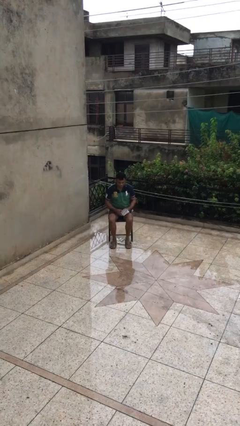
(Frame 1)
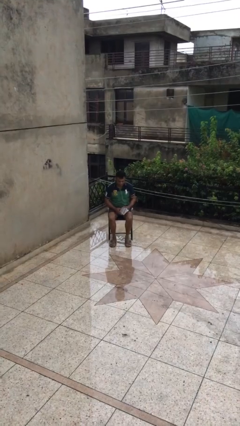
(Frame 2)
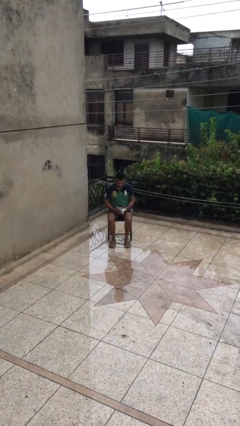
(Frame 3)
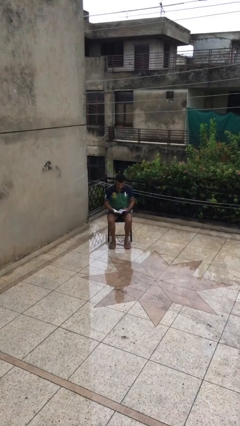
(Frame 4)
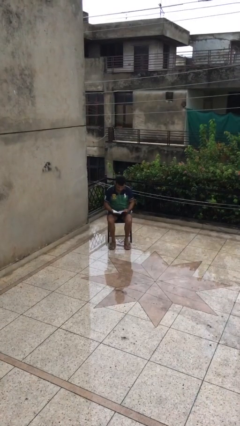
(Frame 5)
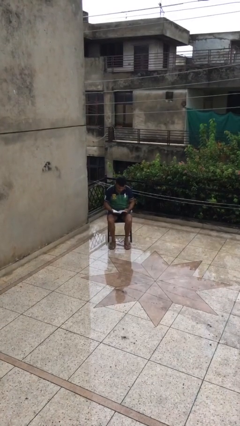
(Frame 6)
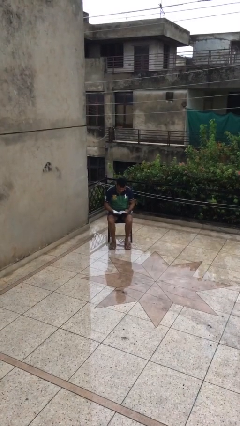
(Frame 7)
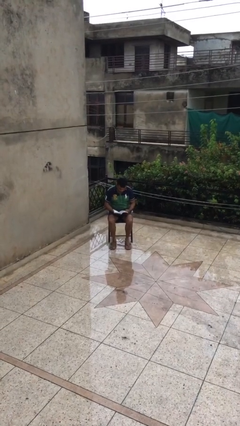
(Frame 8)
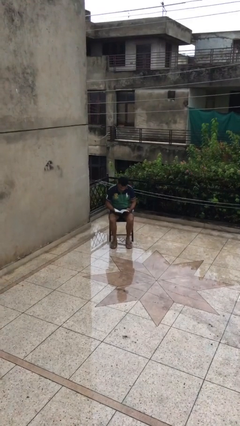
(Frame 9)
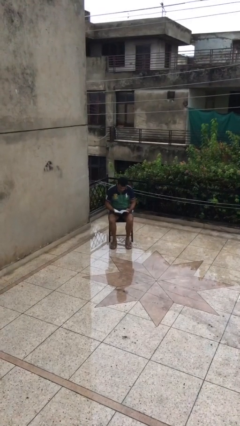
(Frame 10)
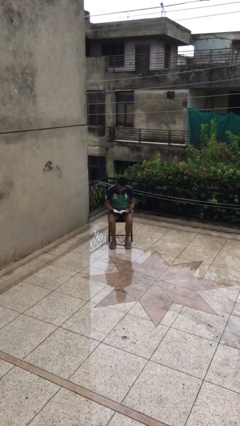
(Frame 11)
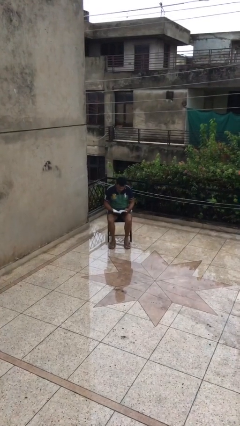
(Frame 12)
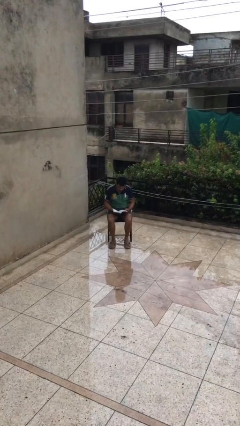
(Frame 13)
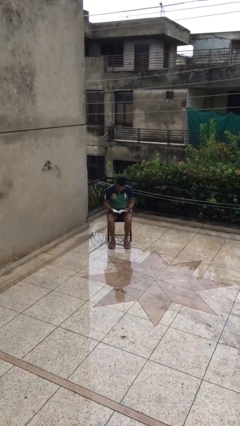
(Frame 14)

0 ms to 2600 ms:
person reads document

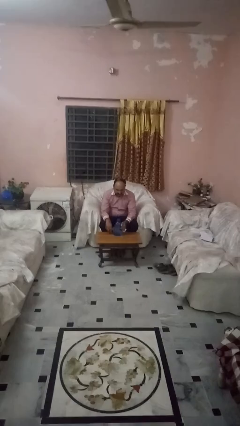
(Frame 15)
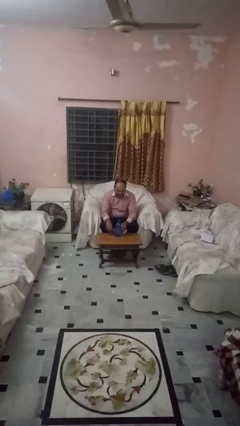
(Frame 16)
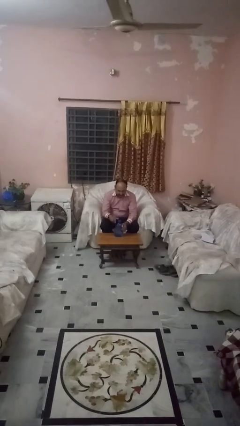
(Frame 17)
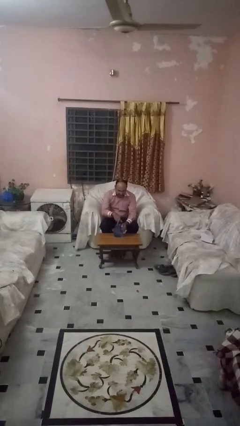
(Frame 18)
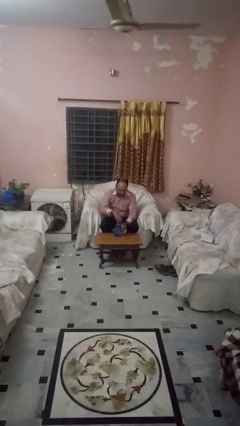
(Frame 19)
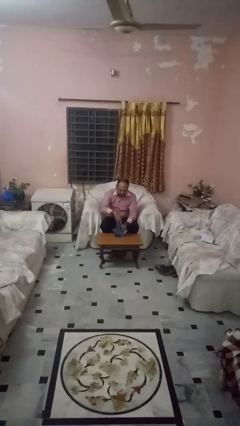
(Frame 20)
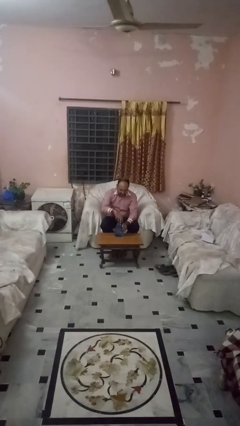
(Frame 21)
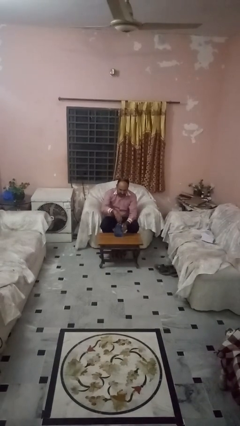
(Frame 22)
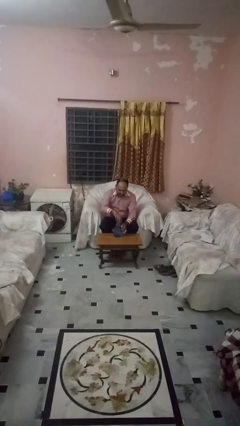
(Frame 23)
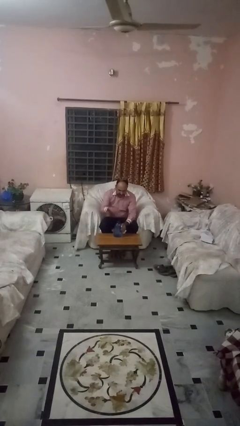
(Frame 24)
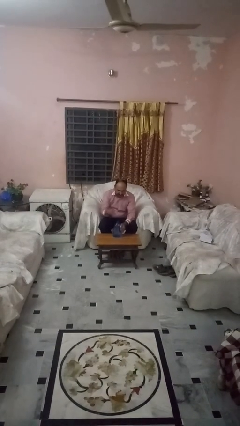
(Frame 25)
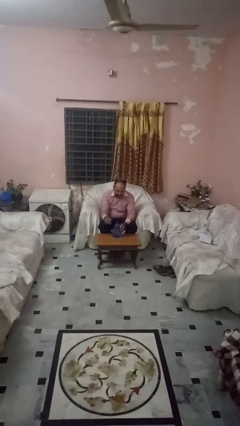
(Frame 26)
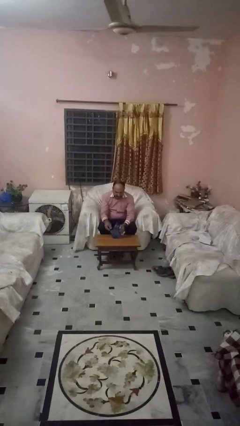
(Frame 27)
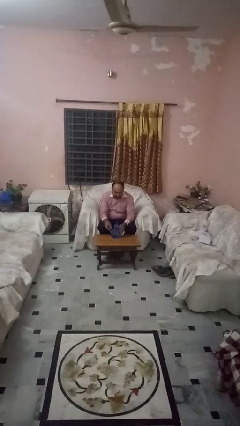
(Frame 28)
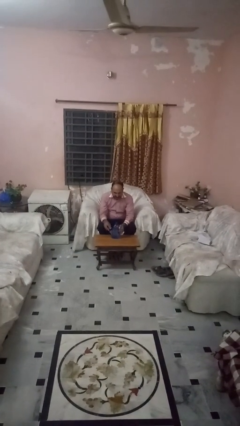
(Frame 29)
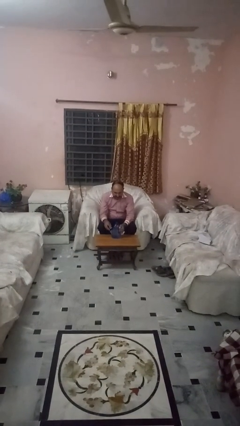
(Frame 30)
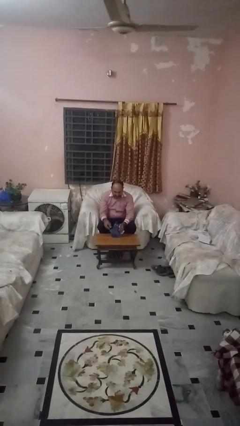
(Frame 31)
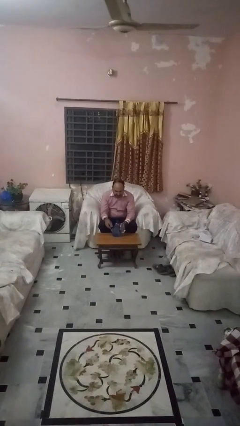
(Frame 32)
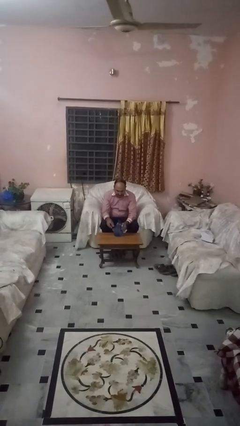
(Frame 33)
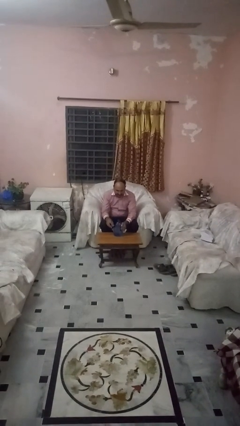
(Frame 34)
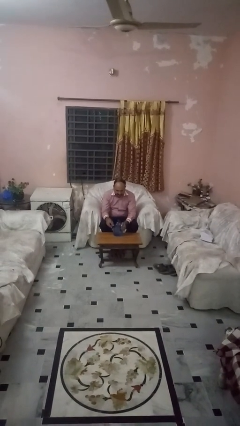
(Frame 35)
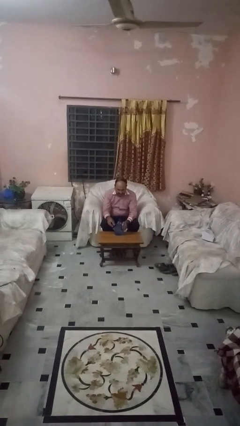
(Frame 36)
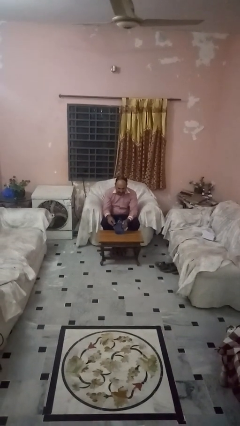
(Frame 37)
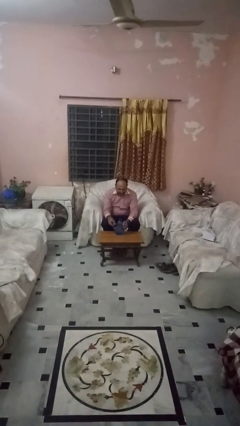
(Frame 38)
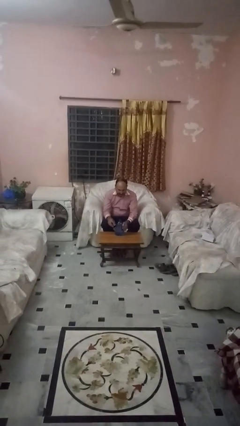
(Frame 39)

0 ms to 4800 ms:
person unscrews lid from bottle

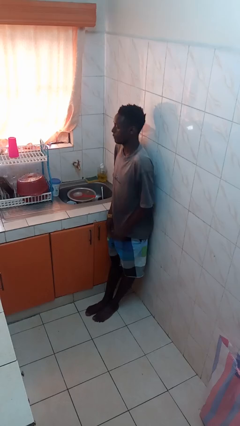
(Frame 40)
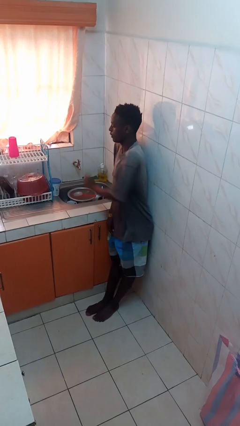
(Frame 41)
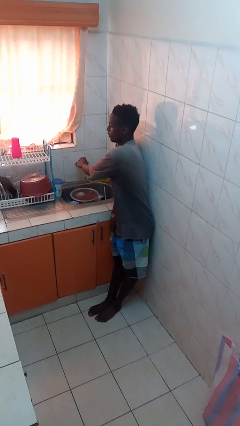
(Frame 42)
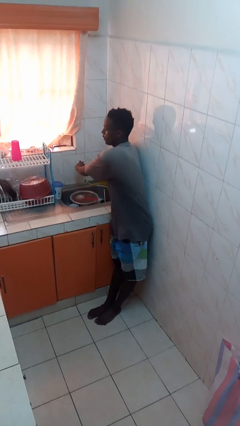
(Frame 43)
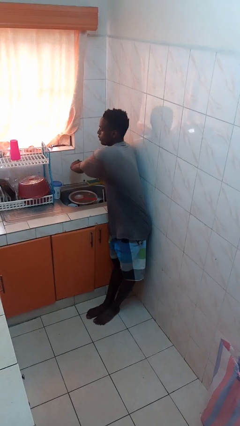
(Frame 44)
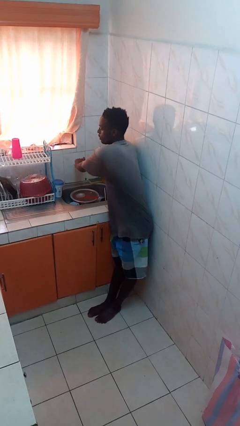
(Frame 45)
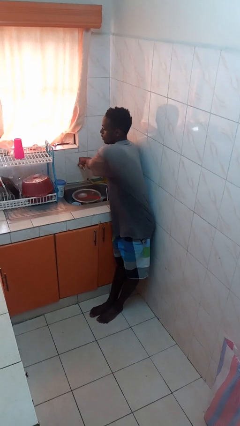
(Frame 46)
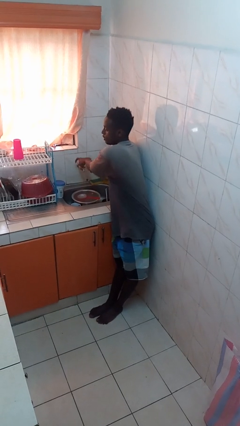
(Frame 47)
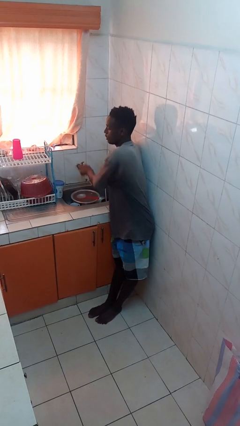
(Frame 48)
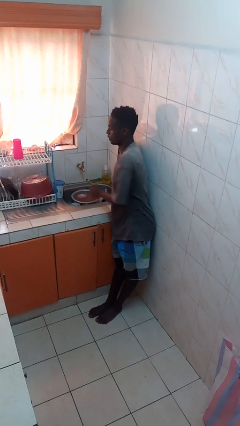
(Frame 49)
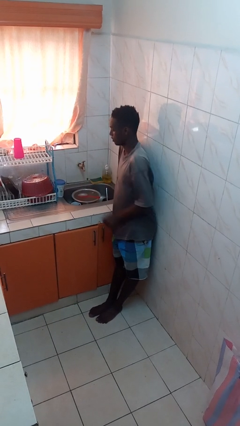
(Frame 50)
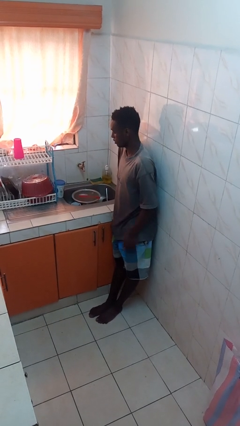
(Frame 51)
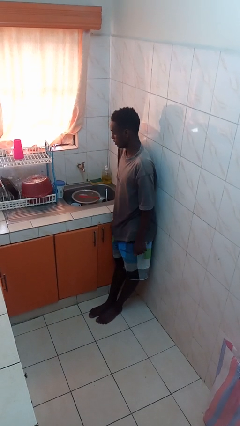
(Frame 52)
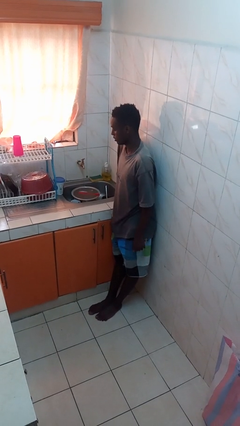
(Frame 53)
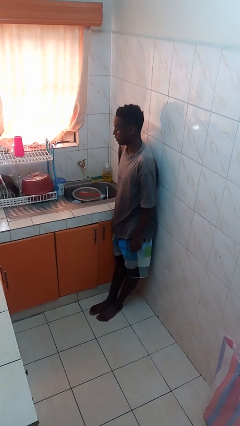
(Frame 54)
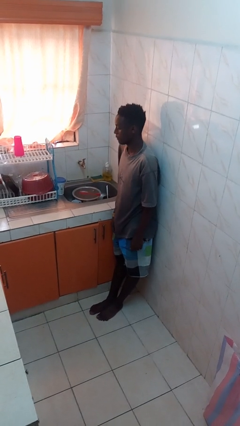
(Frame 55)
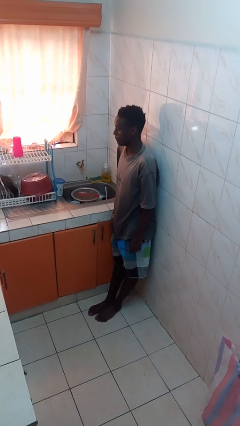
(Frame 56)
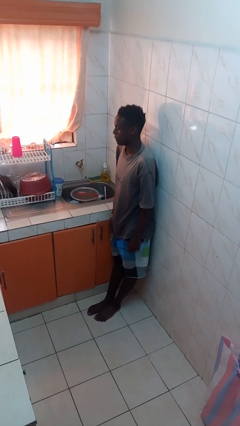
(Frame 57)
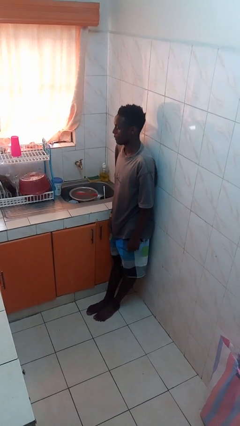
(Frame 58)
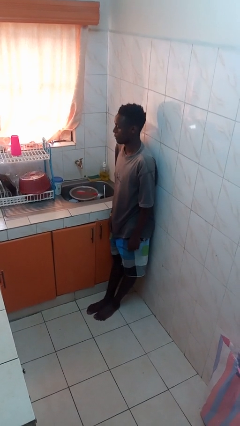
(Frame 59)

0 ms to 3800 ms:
person turns on faucet

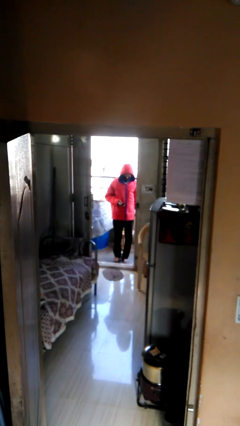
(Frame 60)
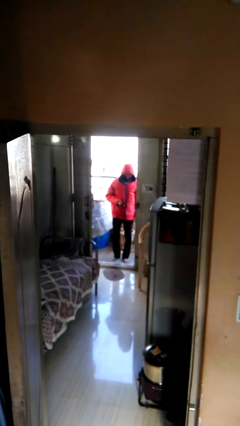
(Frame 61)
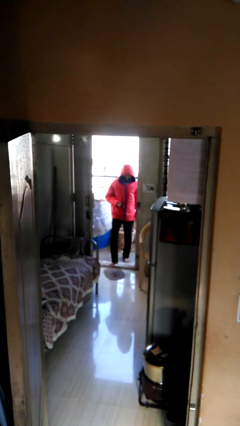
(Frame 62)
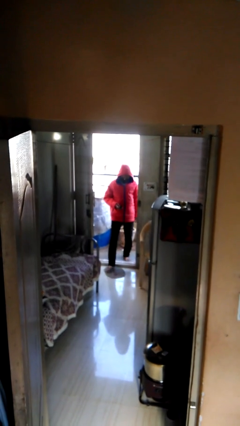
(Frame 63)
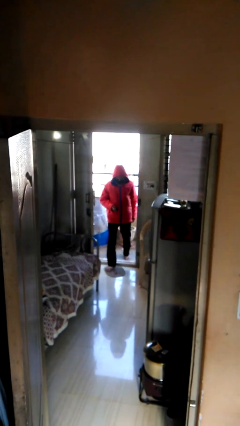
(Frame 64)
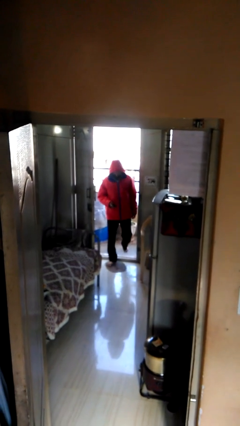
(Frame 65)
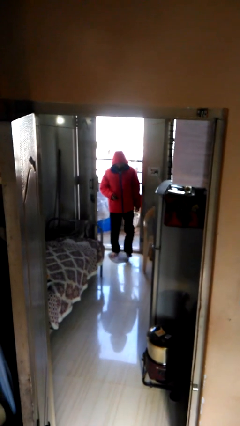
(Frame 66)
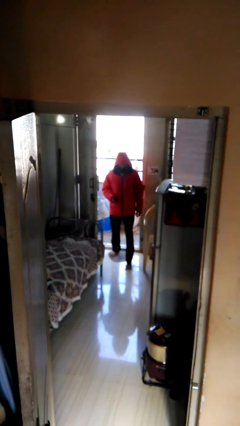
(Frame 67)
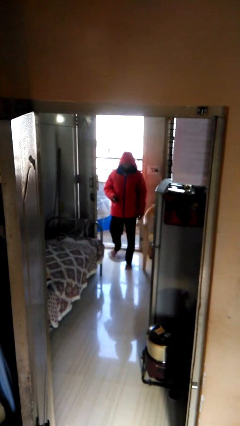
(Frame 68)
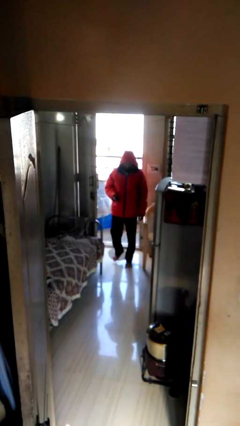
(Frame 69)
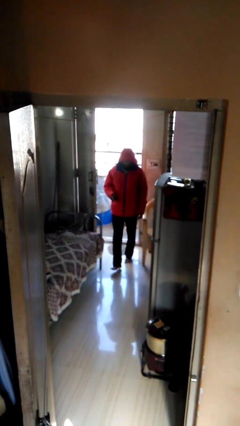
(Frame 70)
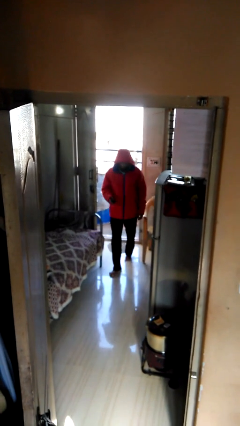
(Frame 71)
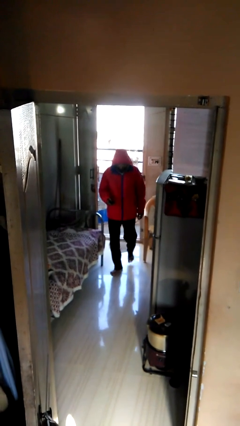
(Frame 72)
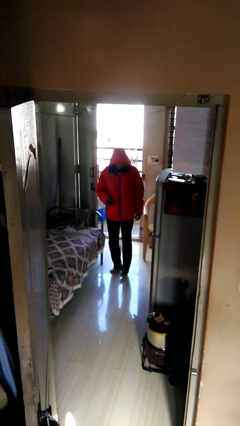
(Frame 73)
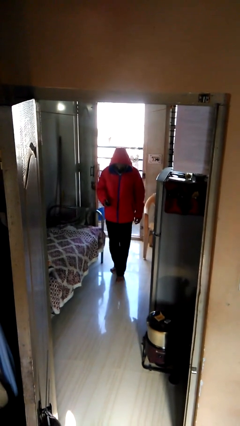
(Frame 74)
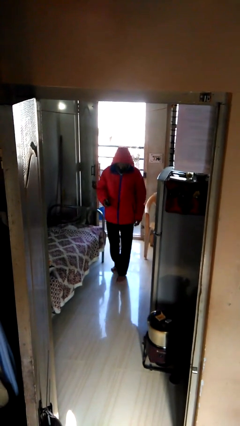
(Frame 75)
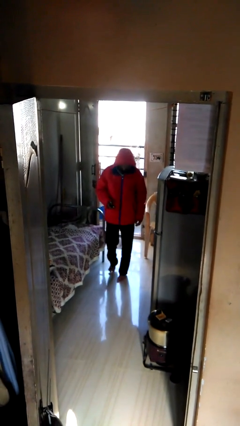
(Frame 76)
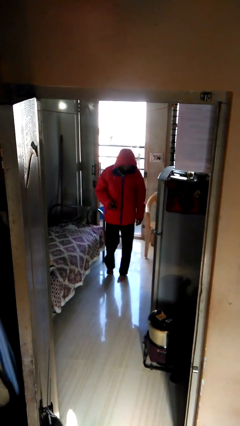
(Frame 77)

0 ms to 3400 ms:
person enters scene through structure

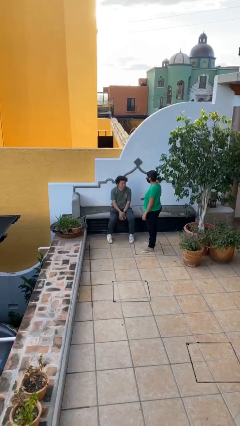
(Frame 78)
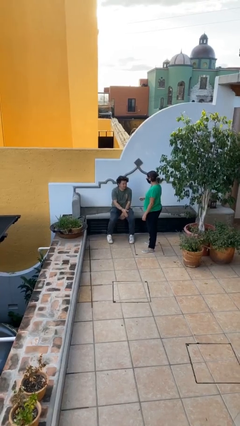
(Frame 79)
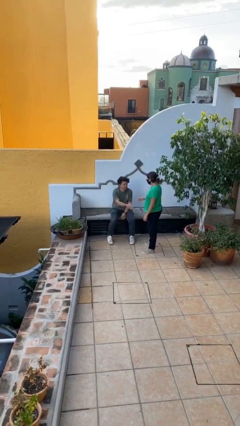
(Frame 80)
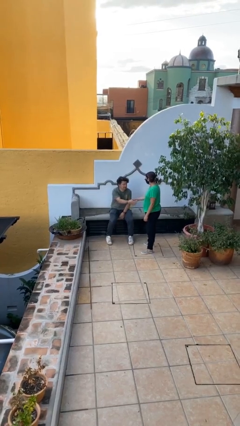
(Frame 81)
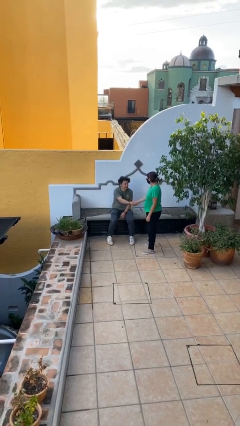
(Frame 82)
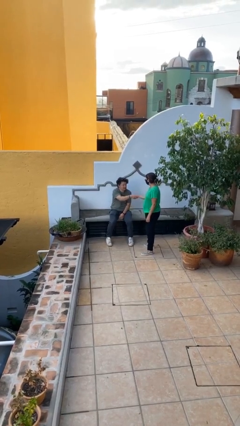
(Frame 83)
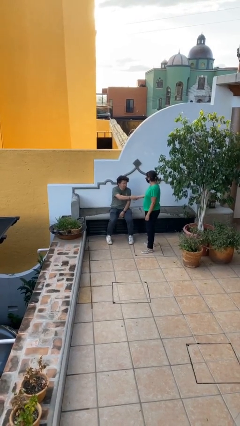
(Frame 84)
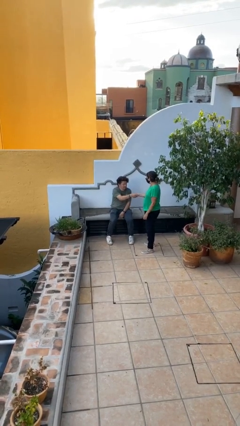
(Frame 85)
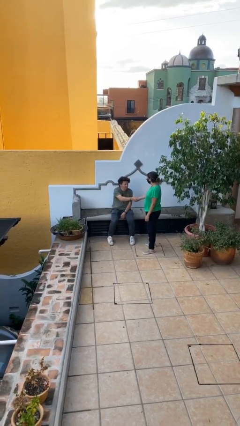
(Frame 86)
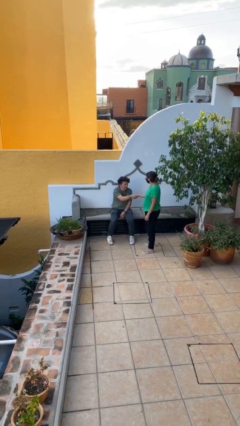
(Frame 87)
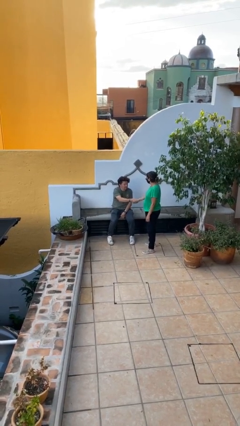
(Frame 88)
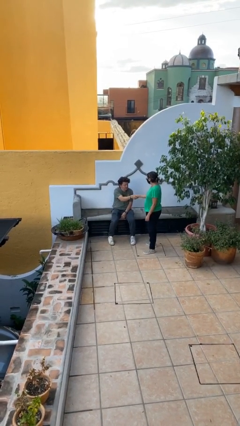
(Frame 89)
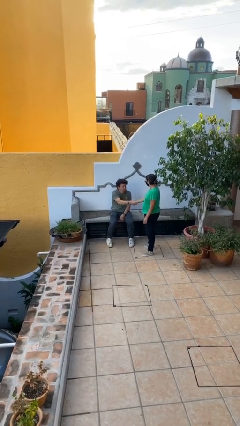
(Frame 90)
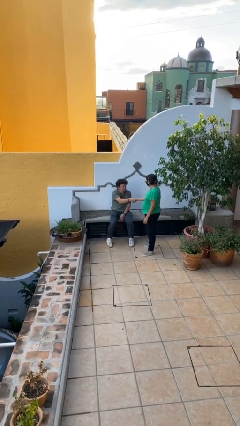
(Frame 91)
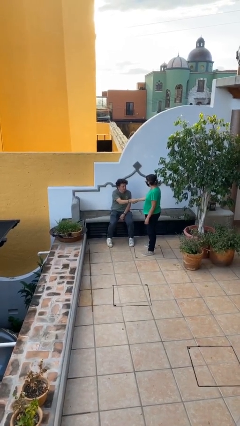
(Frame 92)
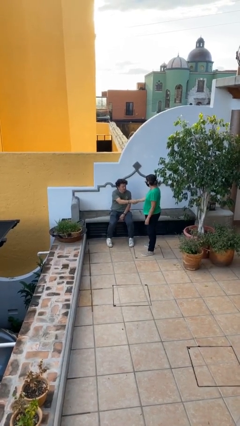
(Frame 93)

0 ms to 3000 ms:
person shakes hand
